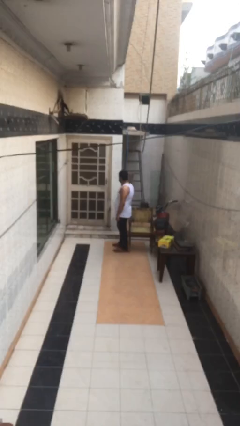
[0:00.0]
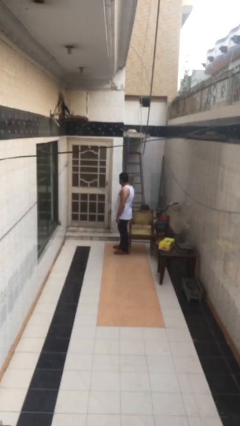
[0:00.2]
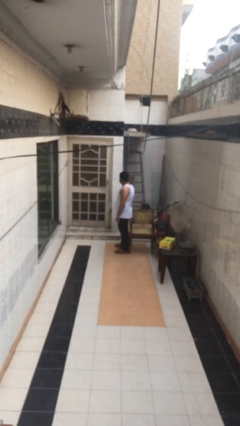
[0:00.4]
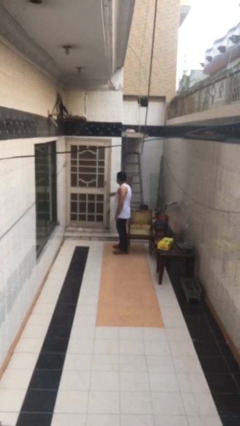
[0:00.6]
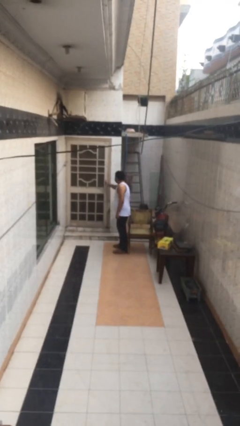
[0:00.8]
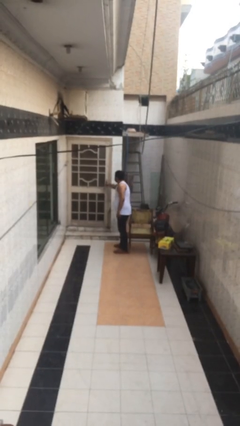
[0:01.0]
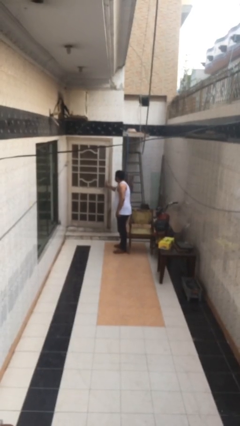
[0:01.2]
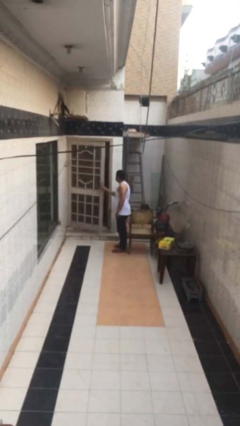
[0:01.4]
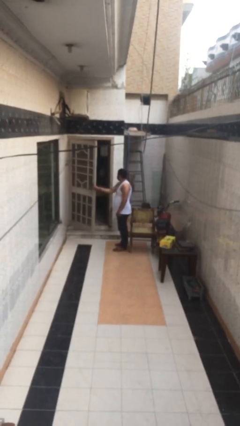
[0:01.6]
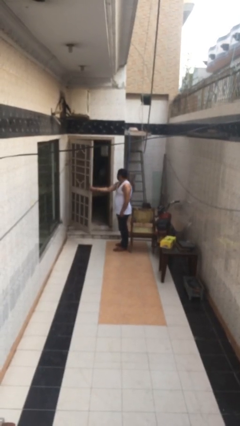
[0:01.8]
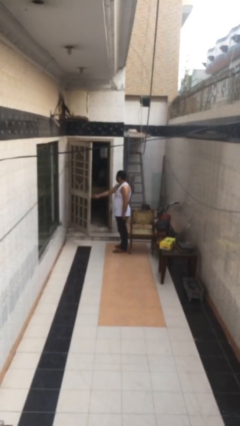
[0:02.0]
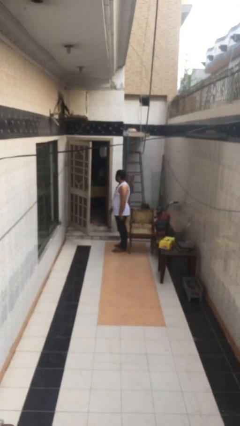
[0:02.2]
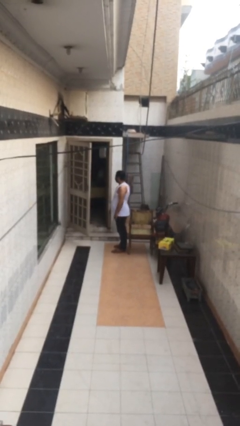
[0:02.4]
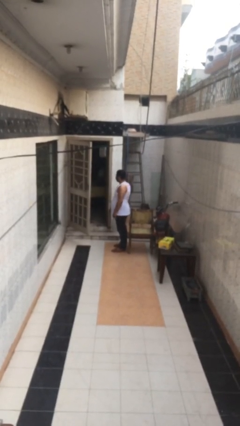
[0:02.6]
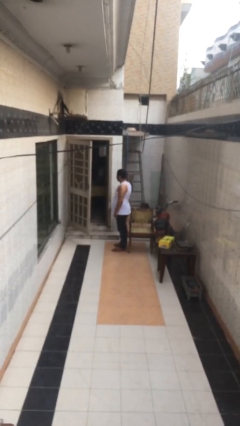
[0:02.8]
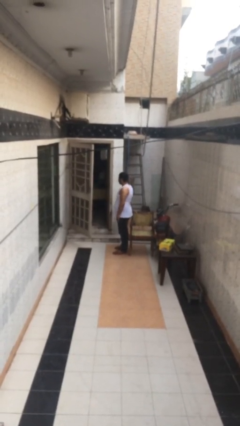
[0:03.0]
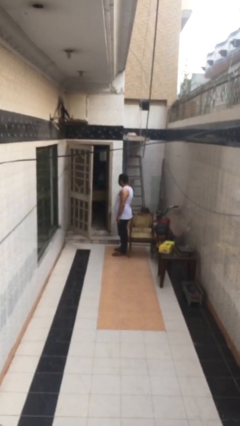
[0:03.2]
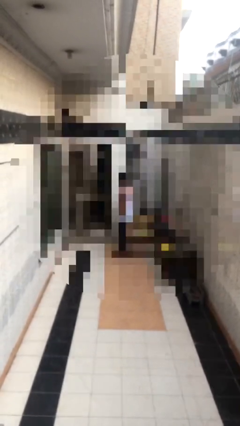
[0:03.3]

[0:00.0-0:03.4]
person opens facility door

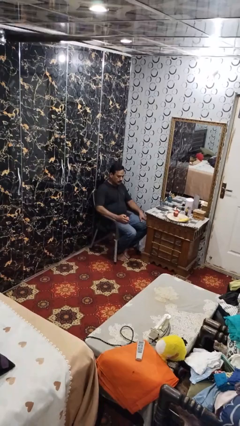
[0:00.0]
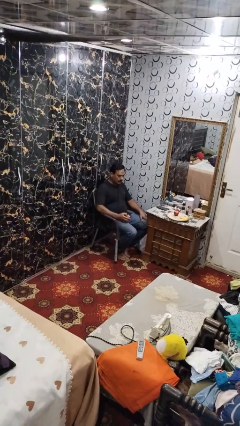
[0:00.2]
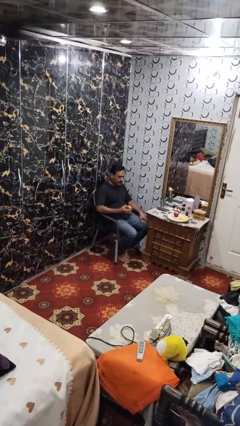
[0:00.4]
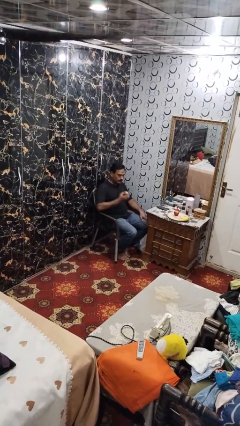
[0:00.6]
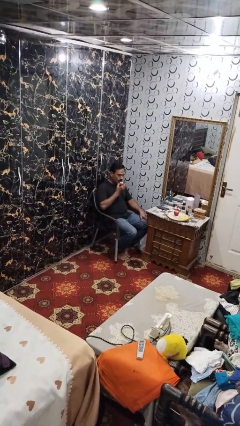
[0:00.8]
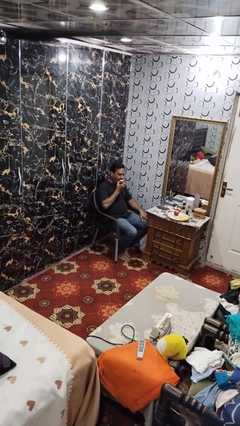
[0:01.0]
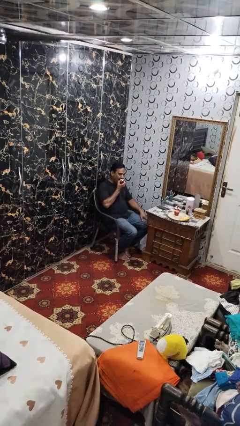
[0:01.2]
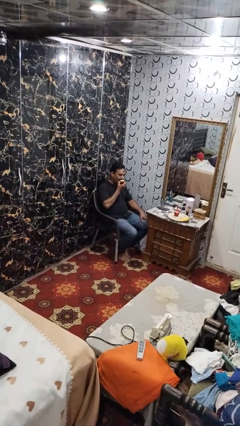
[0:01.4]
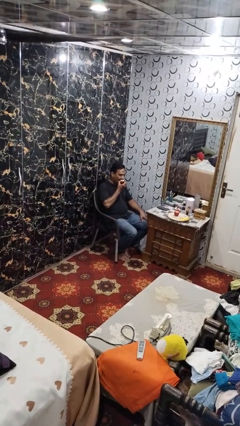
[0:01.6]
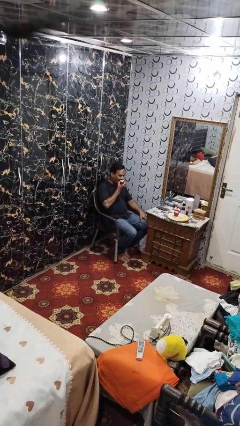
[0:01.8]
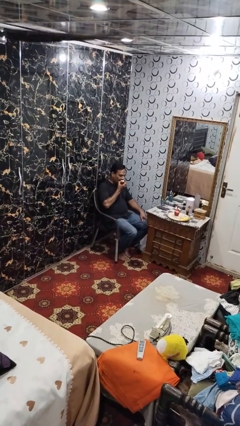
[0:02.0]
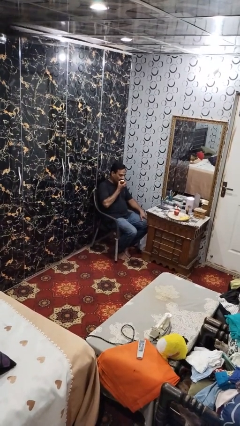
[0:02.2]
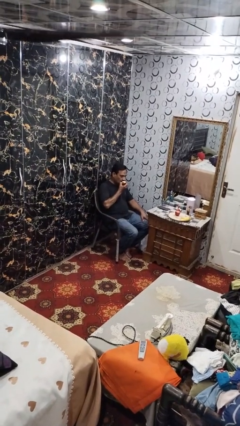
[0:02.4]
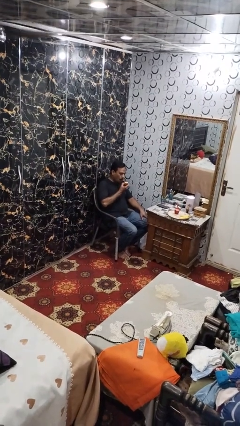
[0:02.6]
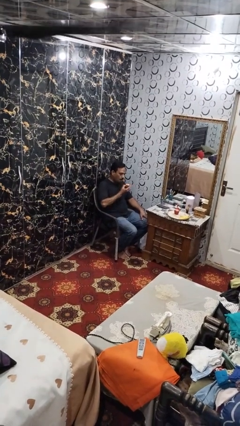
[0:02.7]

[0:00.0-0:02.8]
person eats apple

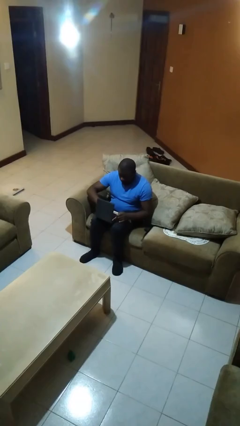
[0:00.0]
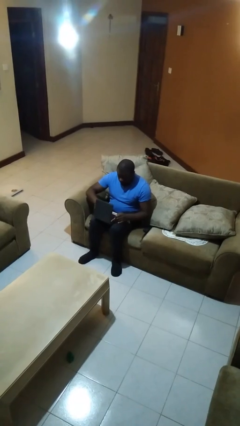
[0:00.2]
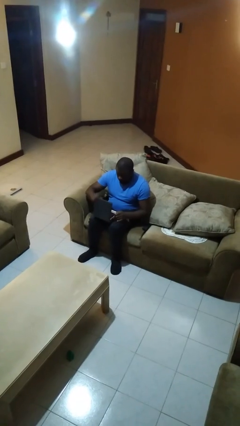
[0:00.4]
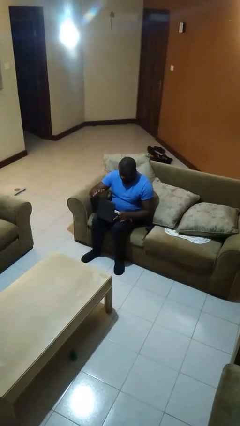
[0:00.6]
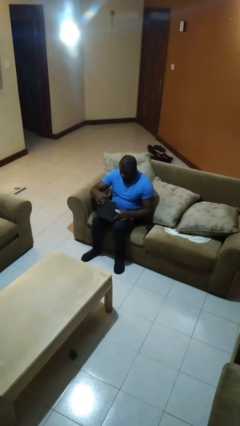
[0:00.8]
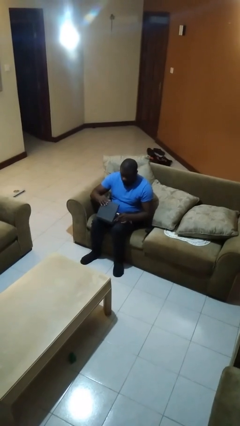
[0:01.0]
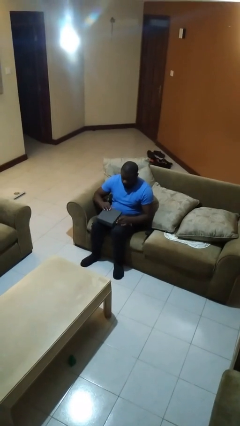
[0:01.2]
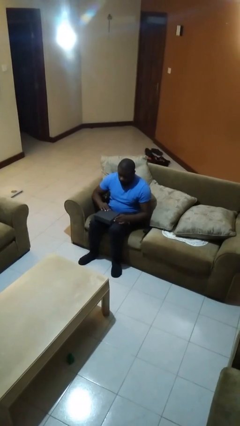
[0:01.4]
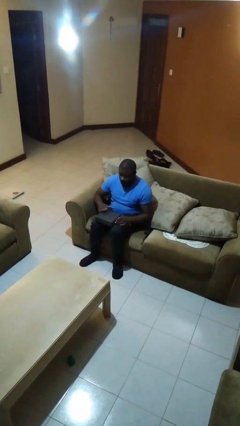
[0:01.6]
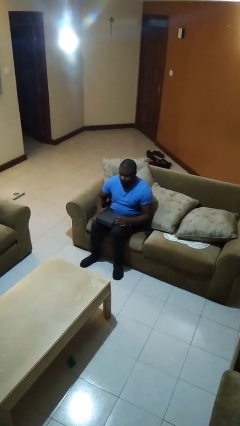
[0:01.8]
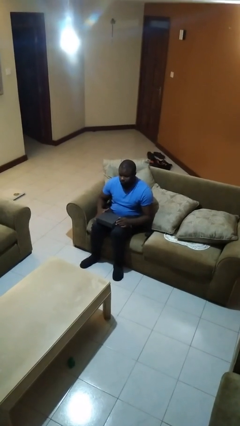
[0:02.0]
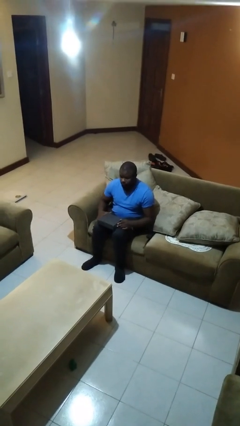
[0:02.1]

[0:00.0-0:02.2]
person closes jewelry box

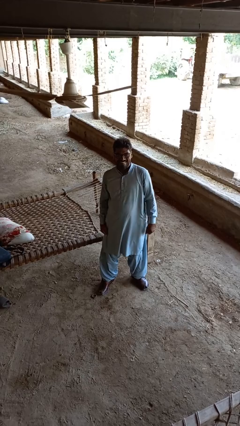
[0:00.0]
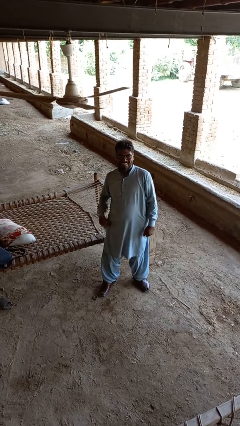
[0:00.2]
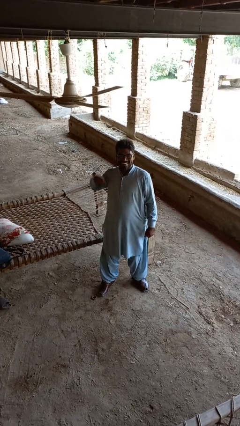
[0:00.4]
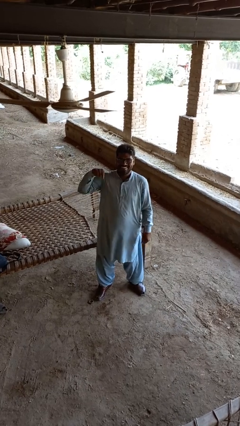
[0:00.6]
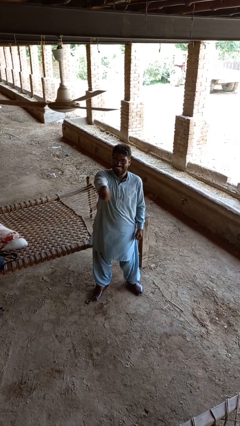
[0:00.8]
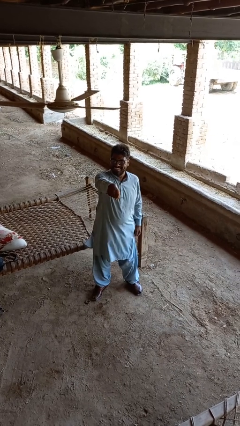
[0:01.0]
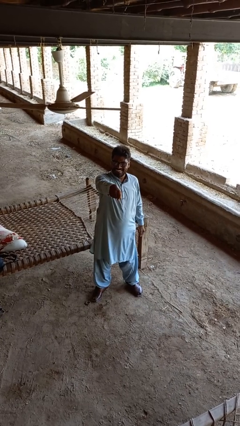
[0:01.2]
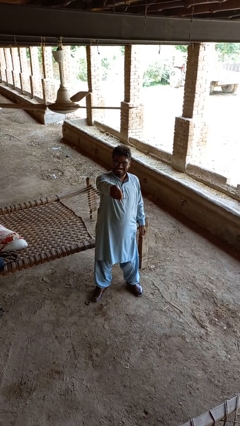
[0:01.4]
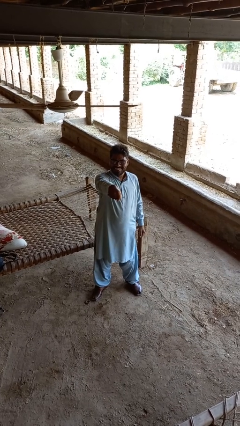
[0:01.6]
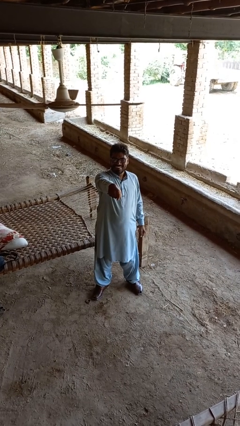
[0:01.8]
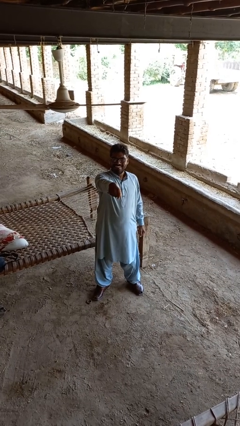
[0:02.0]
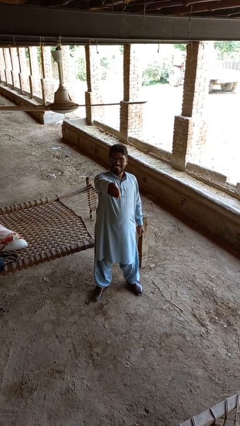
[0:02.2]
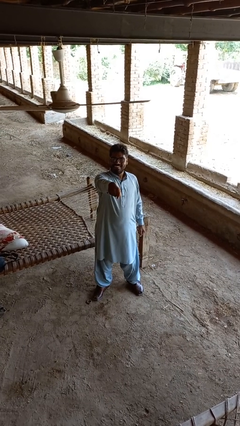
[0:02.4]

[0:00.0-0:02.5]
person punches

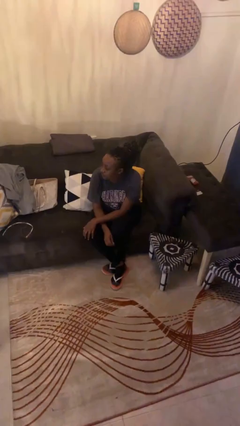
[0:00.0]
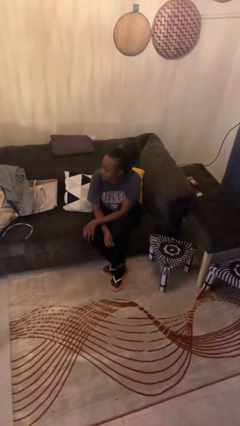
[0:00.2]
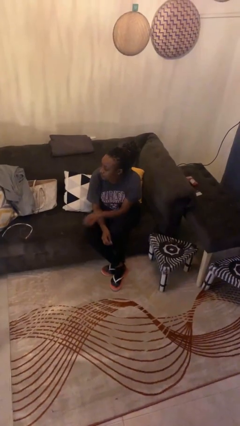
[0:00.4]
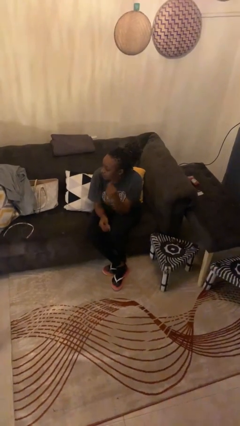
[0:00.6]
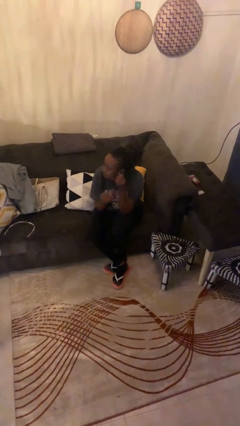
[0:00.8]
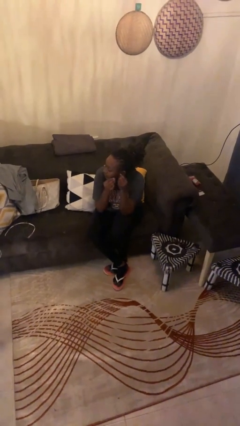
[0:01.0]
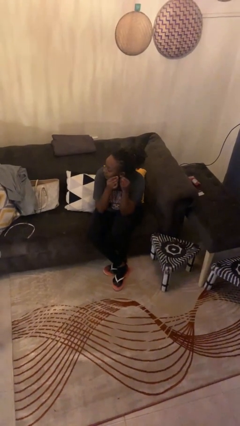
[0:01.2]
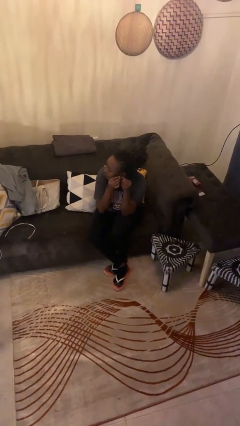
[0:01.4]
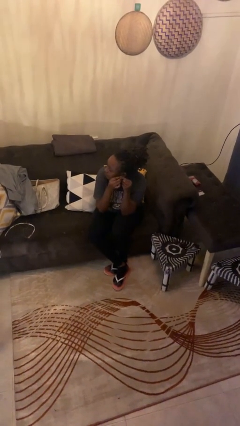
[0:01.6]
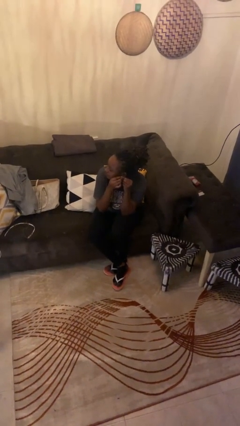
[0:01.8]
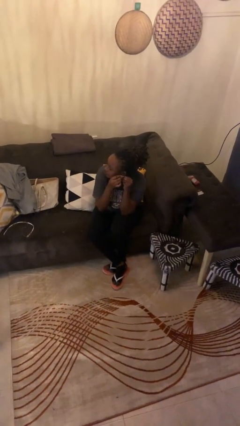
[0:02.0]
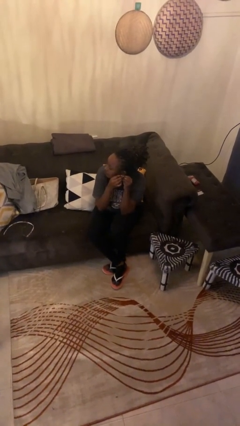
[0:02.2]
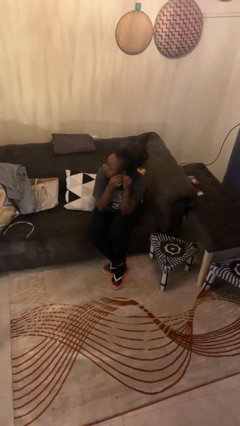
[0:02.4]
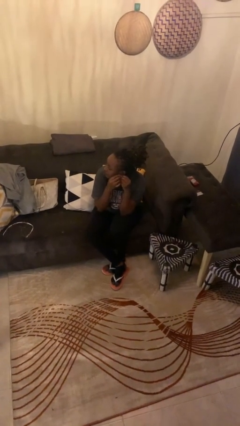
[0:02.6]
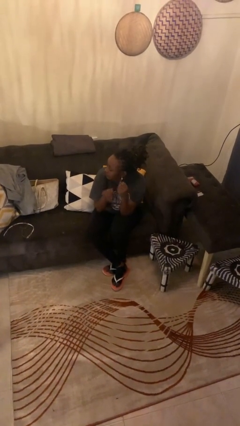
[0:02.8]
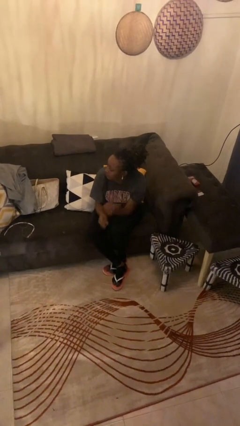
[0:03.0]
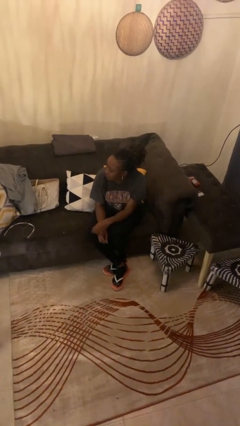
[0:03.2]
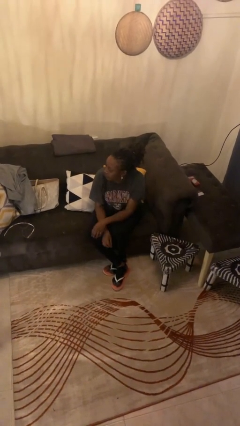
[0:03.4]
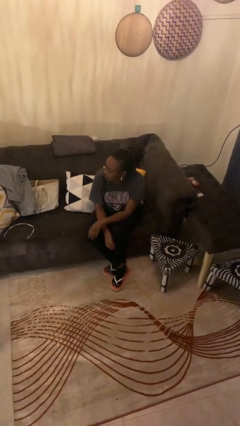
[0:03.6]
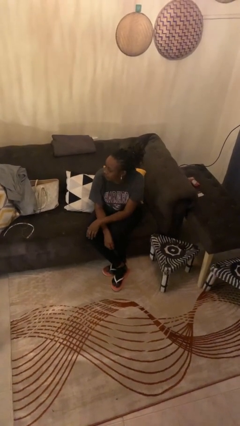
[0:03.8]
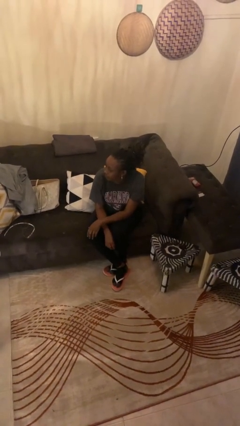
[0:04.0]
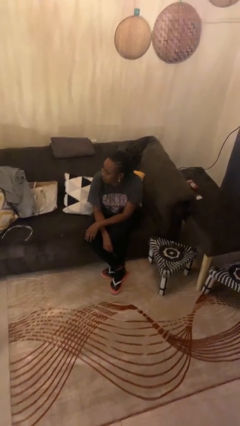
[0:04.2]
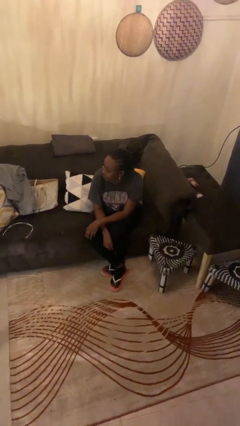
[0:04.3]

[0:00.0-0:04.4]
person puts on earrings

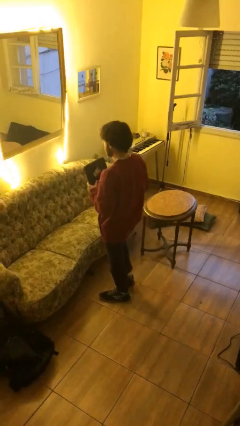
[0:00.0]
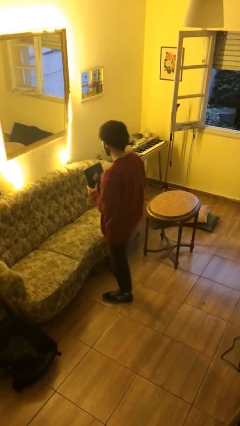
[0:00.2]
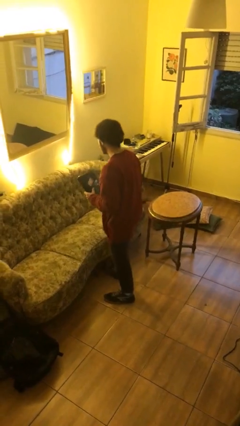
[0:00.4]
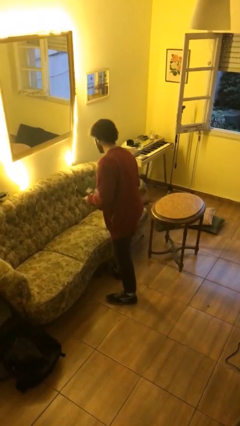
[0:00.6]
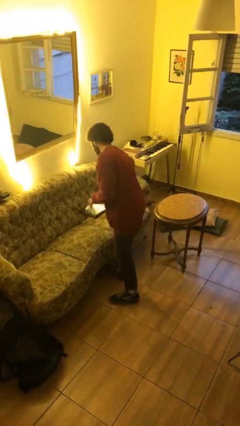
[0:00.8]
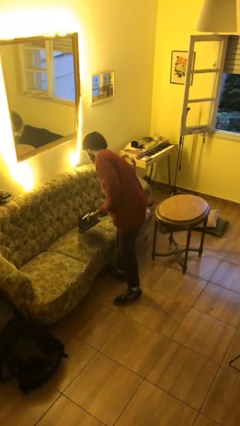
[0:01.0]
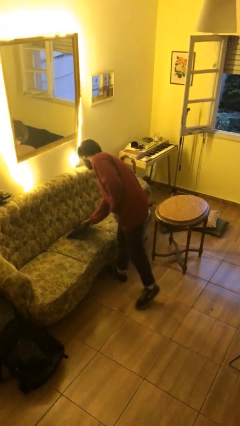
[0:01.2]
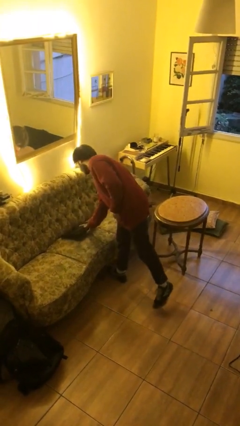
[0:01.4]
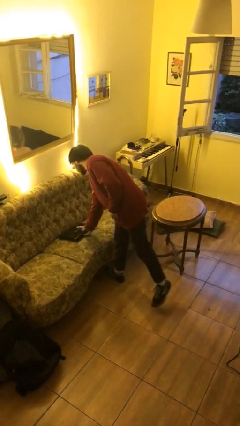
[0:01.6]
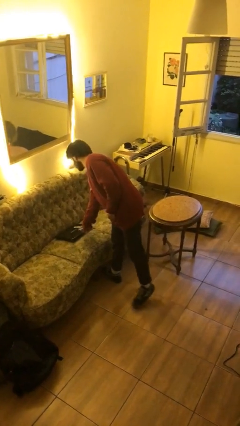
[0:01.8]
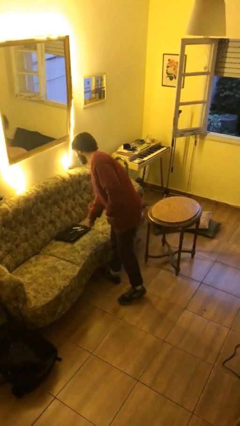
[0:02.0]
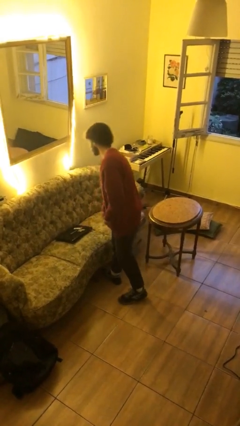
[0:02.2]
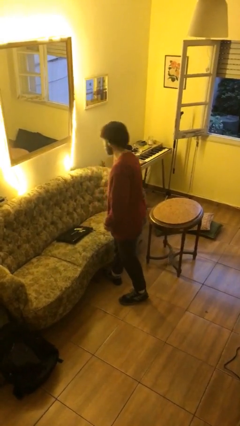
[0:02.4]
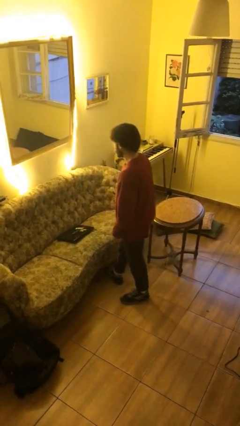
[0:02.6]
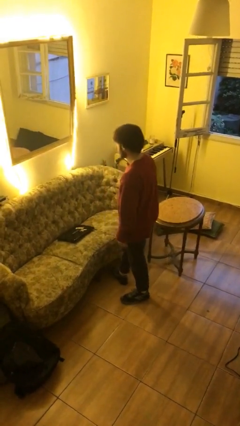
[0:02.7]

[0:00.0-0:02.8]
person puts down object on couch
